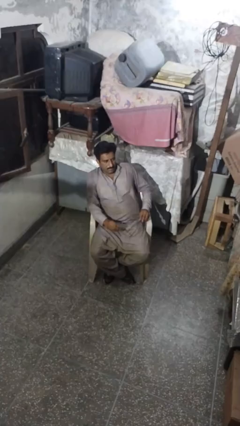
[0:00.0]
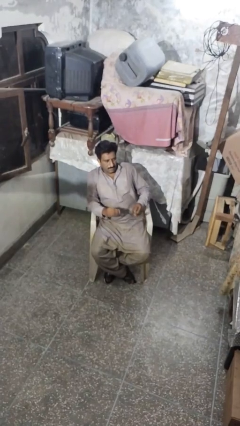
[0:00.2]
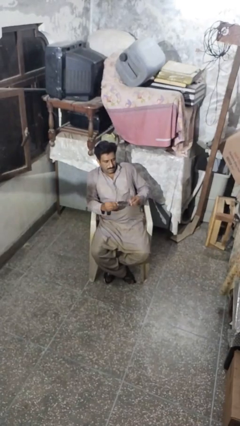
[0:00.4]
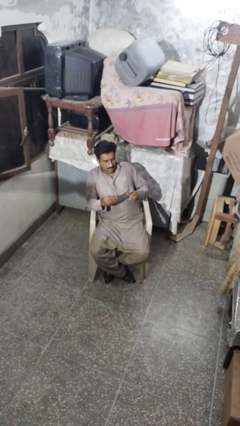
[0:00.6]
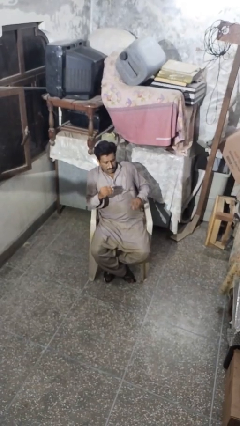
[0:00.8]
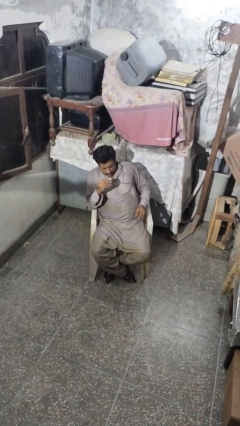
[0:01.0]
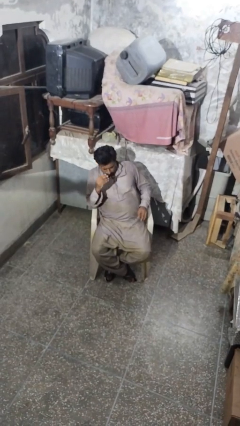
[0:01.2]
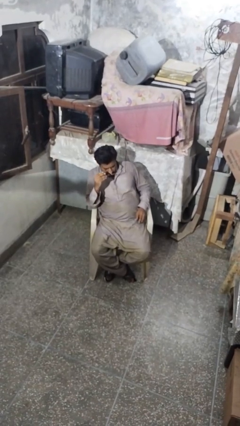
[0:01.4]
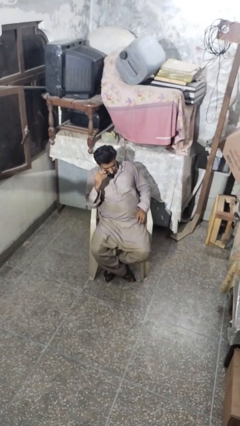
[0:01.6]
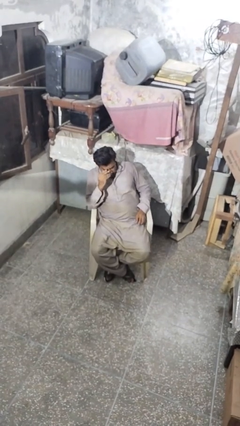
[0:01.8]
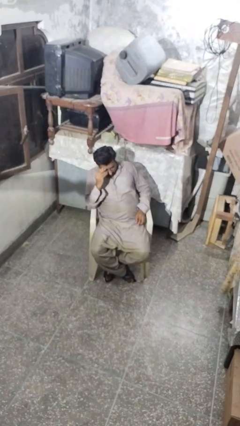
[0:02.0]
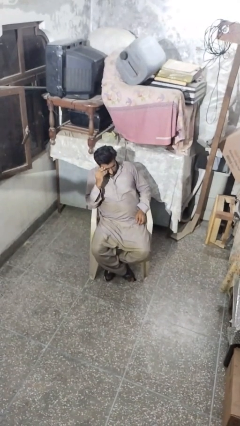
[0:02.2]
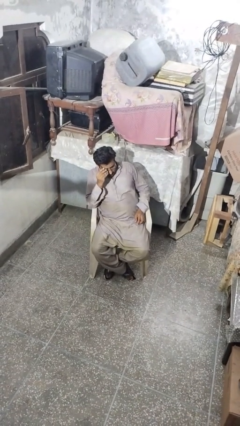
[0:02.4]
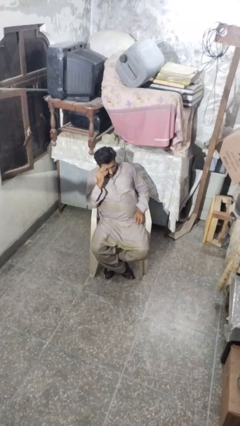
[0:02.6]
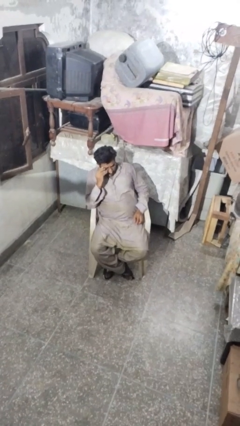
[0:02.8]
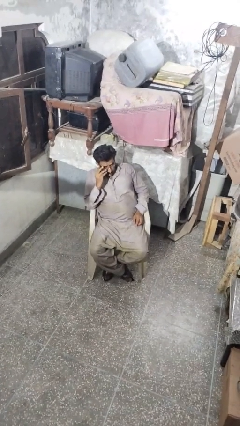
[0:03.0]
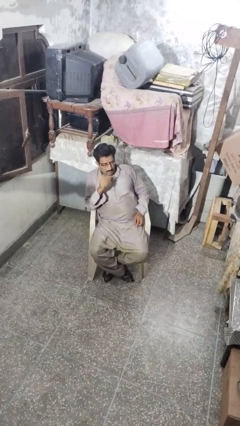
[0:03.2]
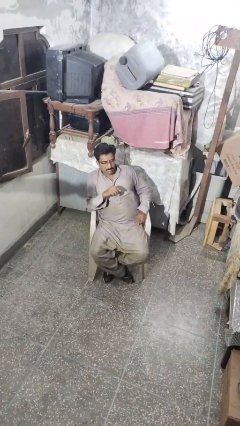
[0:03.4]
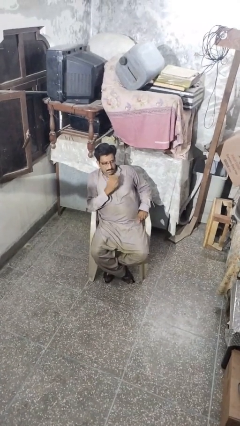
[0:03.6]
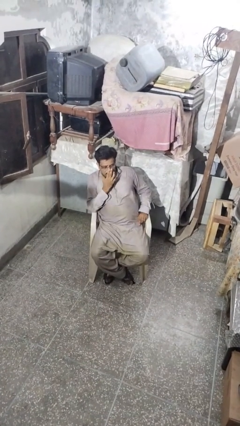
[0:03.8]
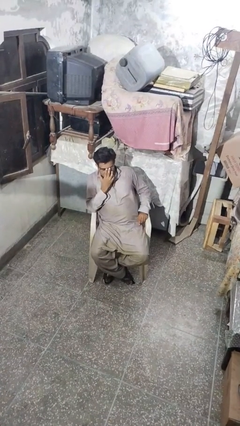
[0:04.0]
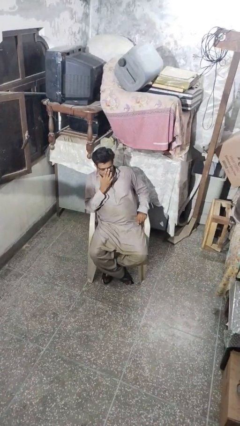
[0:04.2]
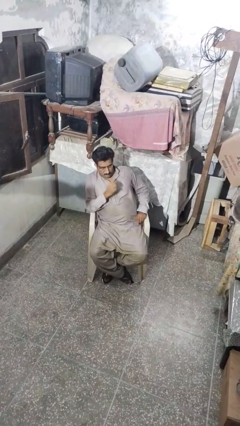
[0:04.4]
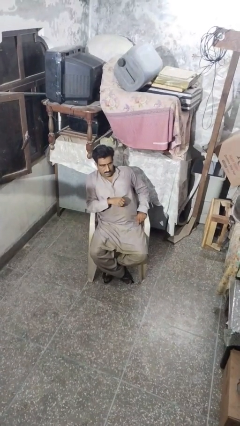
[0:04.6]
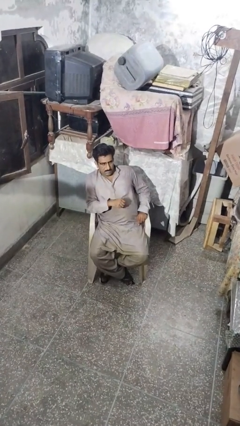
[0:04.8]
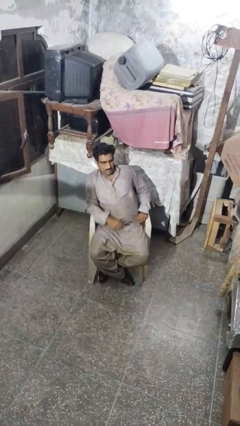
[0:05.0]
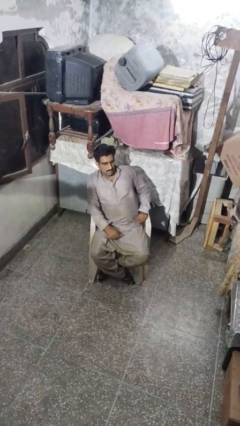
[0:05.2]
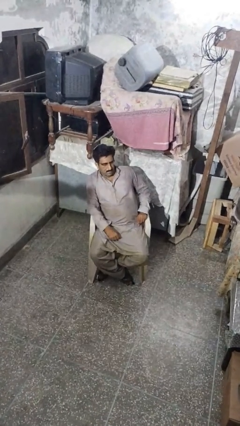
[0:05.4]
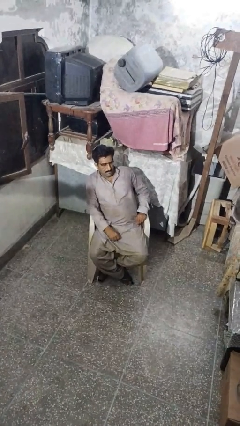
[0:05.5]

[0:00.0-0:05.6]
person puts on glasses

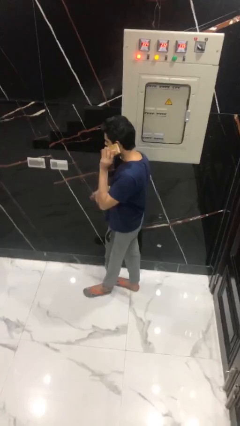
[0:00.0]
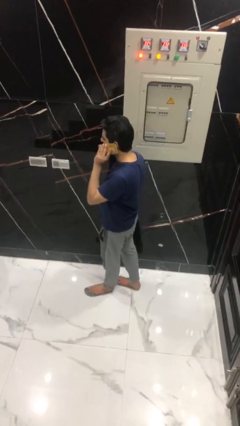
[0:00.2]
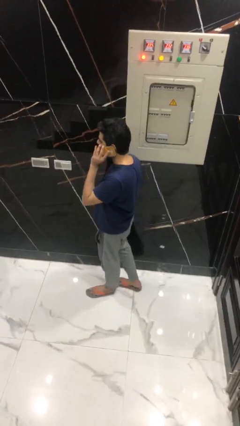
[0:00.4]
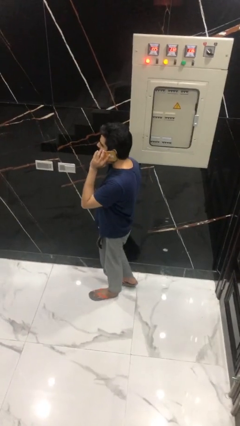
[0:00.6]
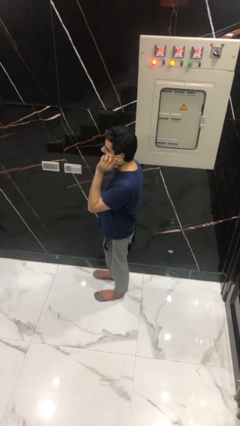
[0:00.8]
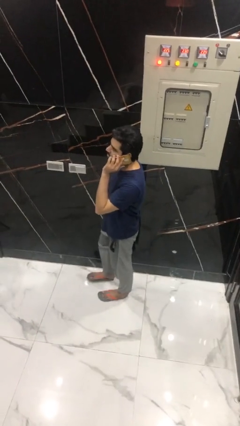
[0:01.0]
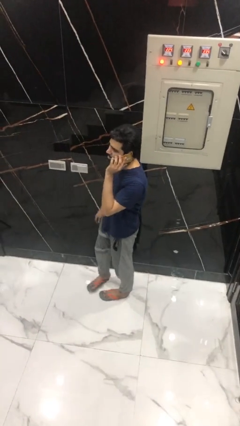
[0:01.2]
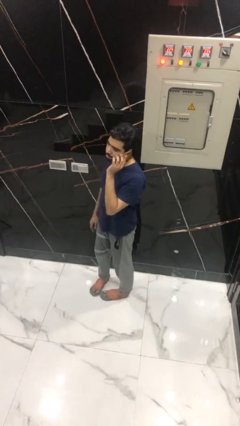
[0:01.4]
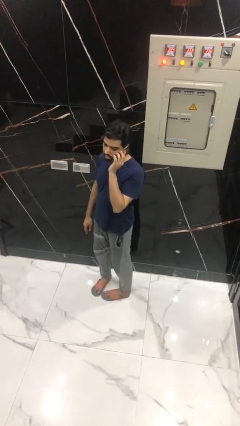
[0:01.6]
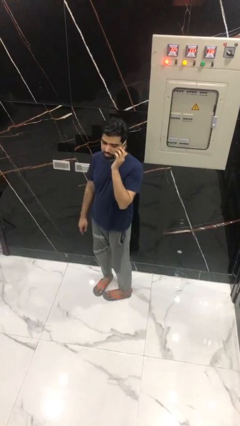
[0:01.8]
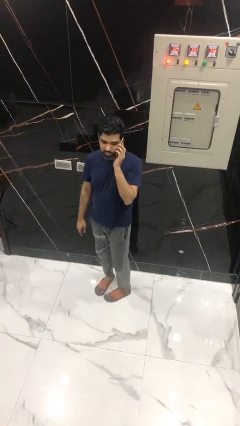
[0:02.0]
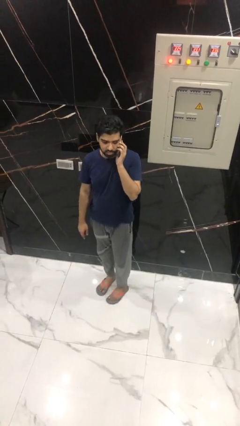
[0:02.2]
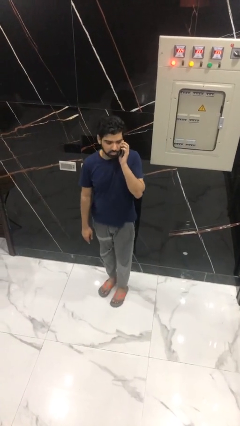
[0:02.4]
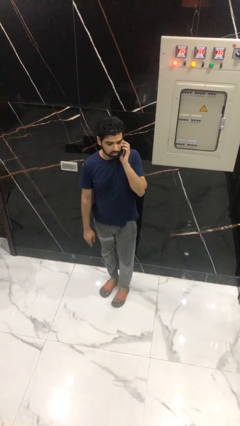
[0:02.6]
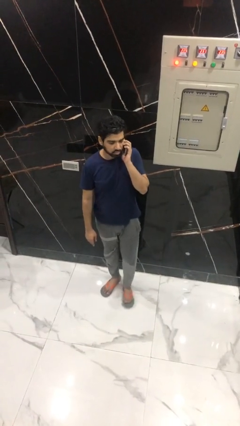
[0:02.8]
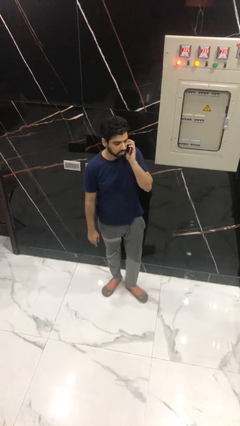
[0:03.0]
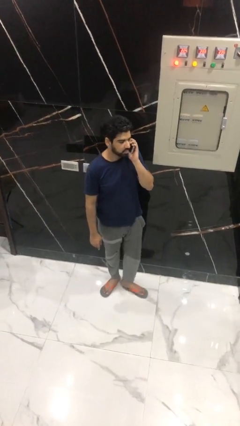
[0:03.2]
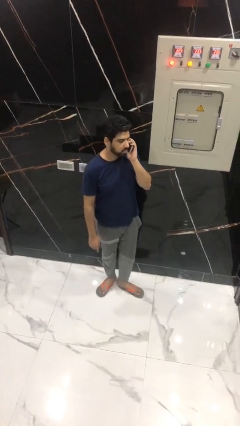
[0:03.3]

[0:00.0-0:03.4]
person talks on phone

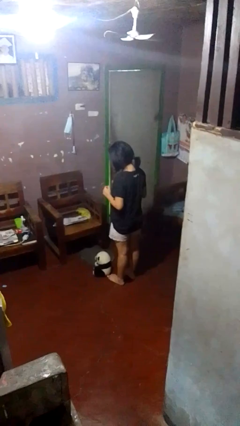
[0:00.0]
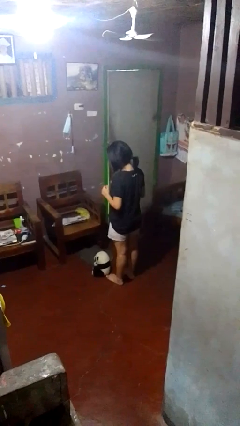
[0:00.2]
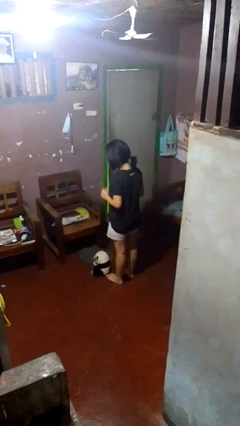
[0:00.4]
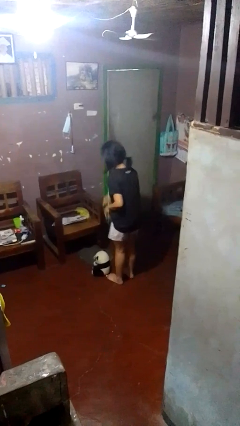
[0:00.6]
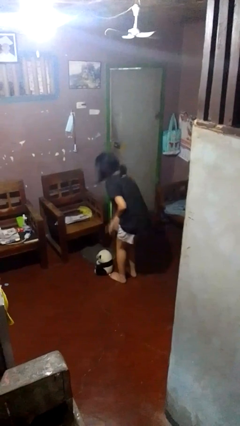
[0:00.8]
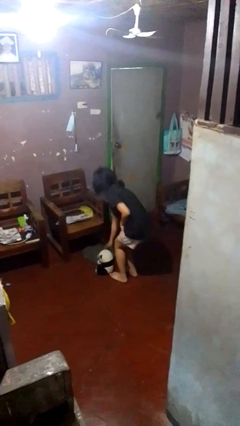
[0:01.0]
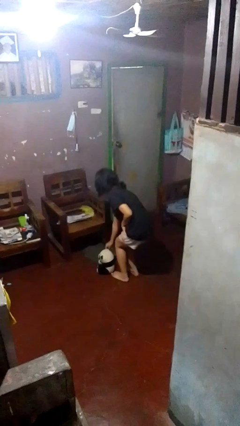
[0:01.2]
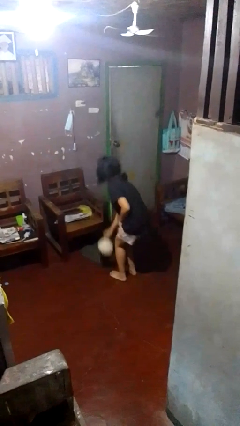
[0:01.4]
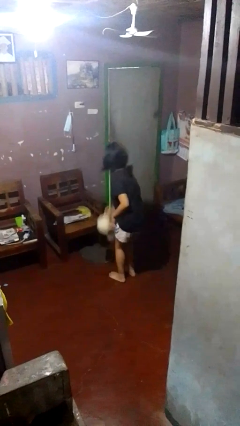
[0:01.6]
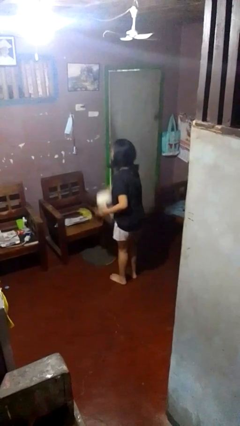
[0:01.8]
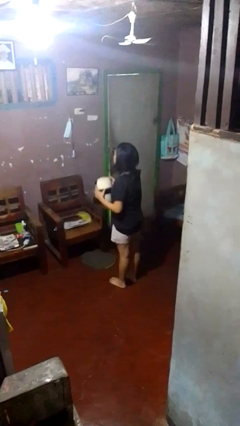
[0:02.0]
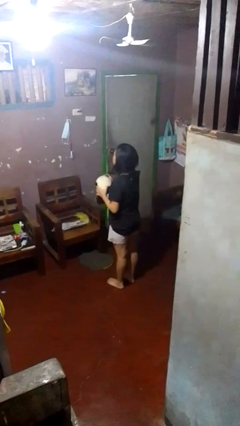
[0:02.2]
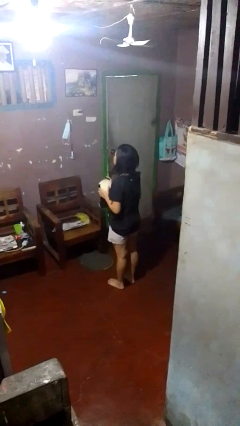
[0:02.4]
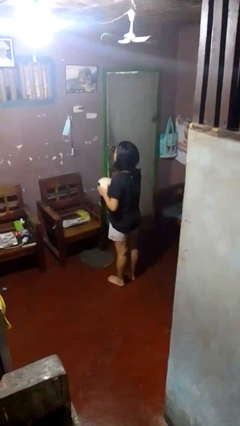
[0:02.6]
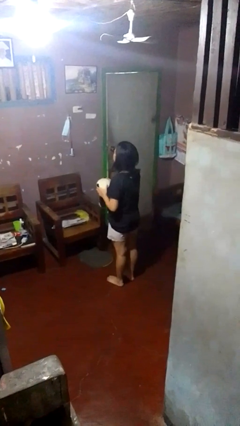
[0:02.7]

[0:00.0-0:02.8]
person picks up object from floor

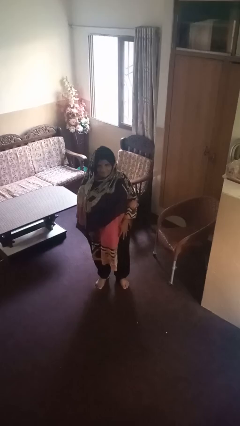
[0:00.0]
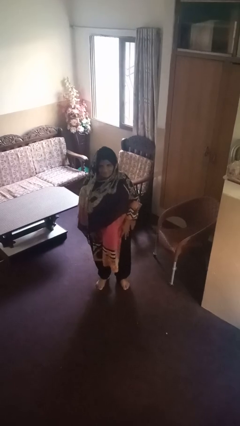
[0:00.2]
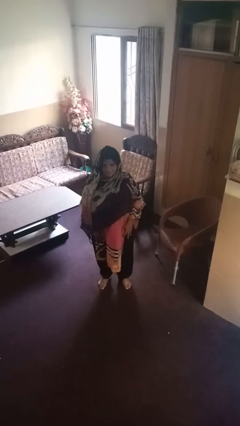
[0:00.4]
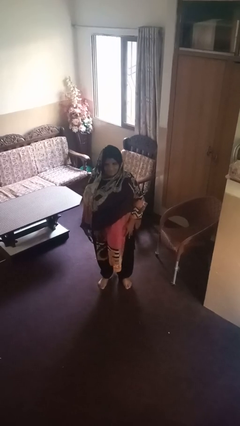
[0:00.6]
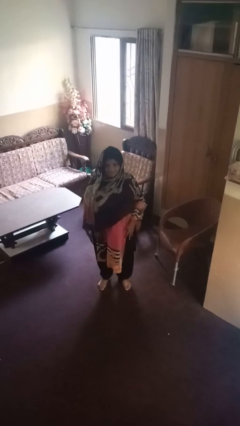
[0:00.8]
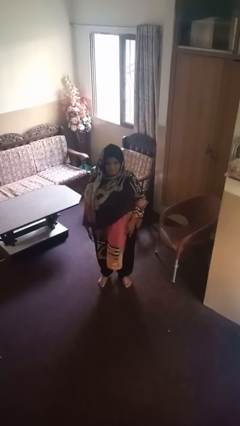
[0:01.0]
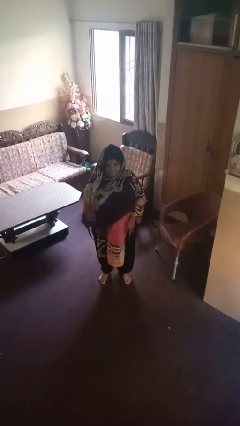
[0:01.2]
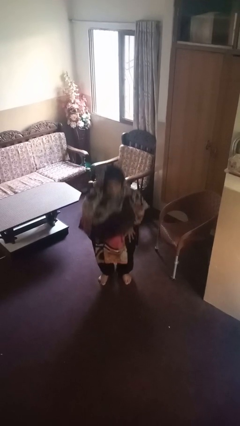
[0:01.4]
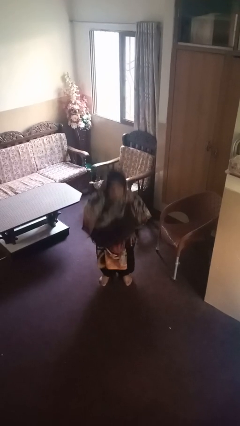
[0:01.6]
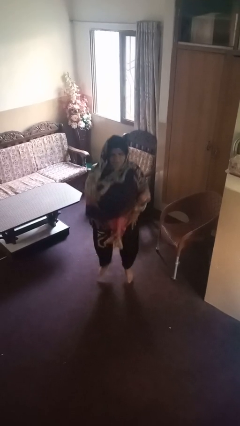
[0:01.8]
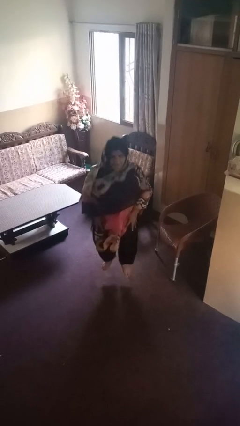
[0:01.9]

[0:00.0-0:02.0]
person jumps

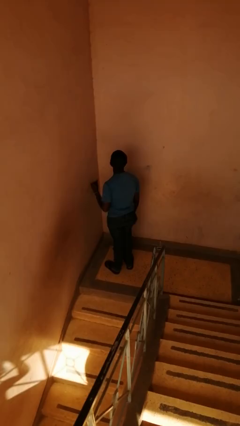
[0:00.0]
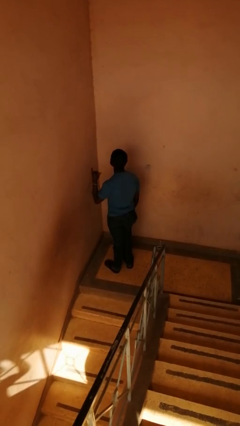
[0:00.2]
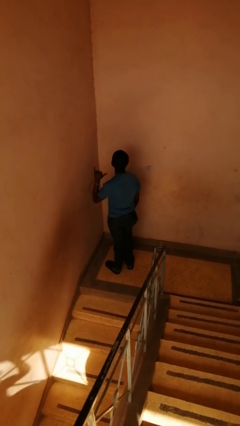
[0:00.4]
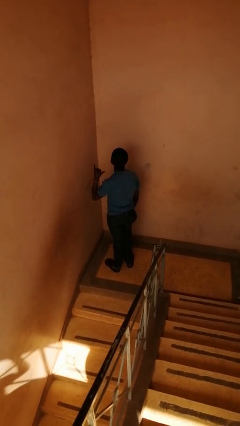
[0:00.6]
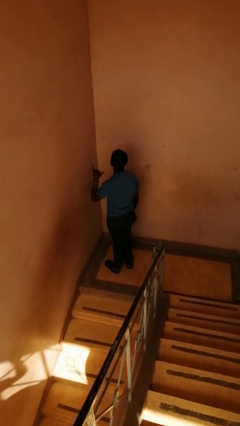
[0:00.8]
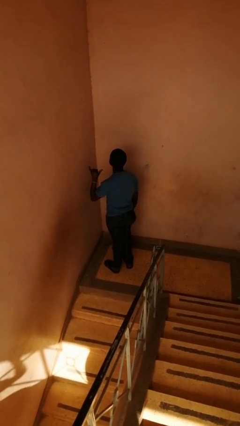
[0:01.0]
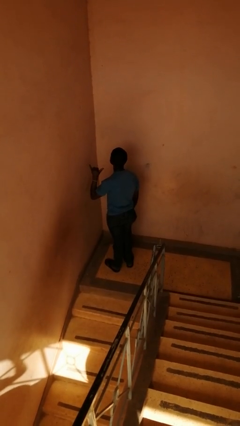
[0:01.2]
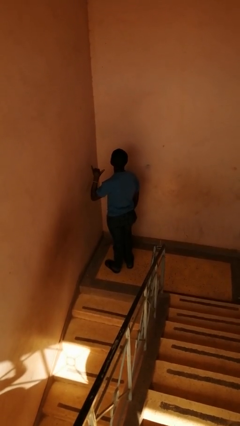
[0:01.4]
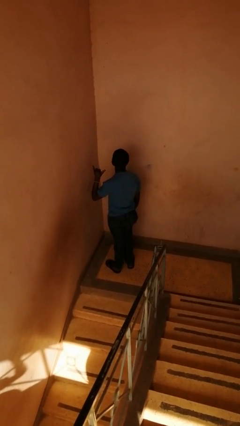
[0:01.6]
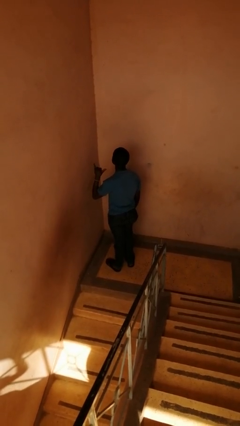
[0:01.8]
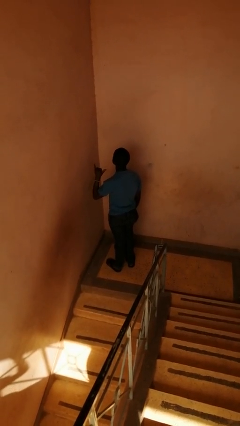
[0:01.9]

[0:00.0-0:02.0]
person gestures hang loose

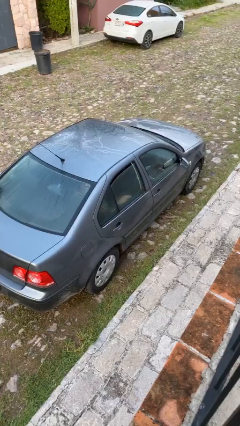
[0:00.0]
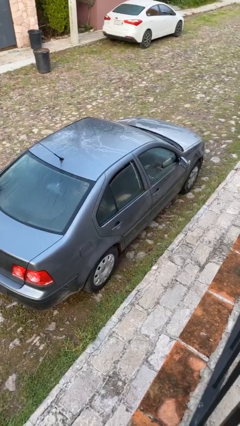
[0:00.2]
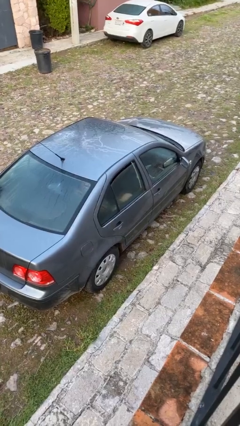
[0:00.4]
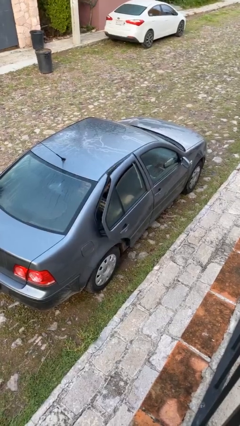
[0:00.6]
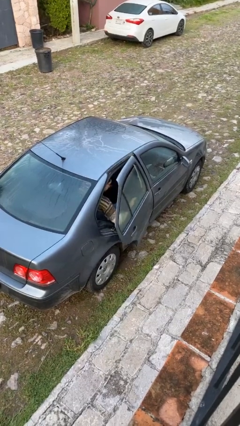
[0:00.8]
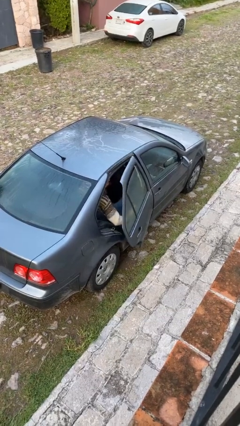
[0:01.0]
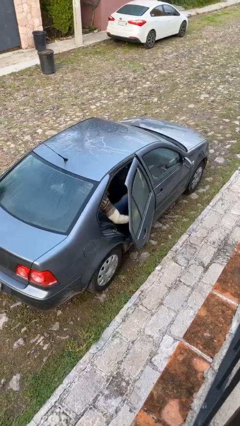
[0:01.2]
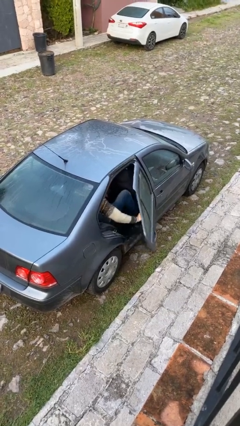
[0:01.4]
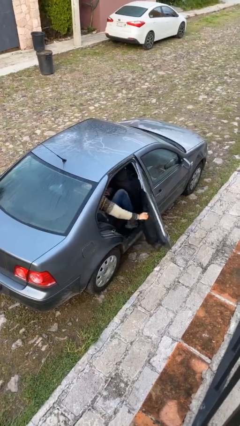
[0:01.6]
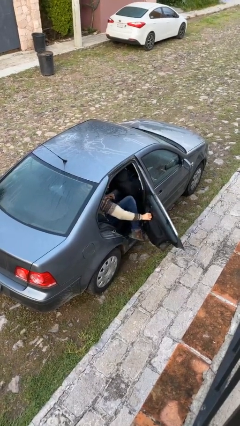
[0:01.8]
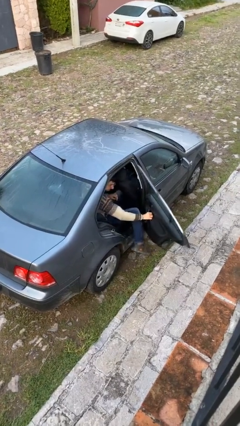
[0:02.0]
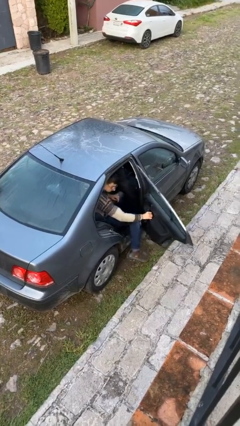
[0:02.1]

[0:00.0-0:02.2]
person opens car door
